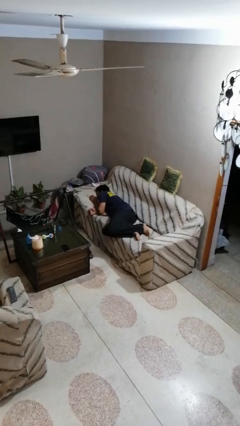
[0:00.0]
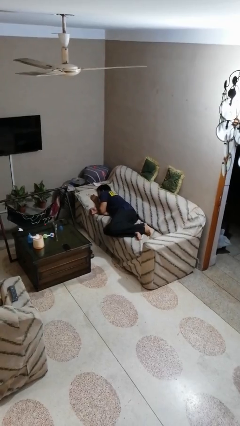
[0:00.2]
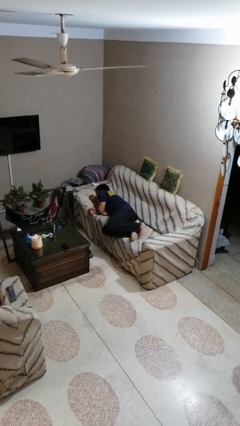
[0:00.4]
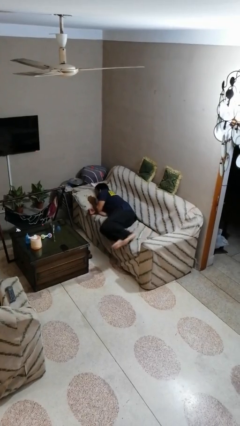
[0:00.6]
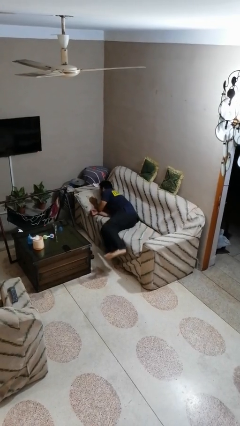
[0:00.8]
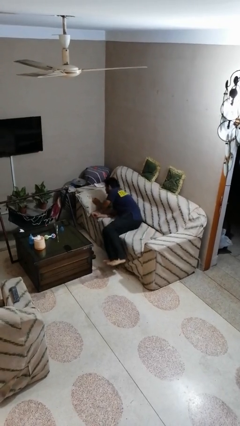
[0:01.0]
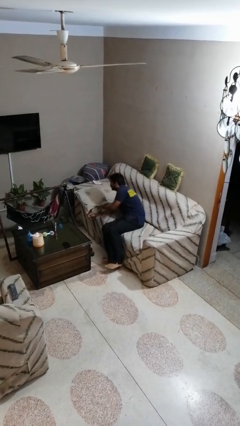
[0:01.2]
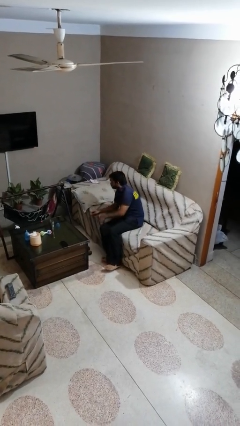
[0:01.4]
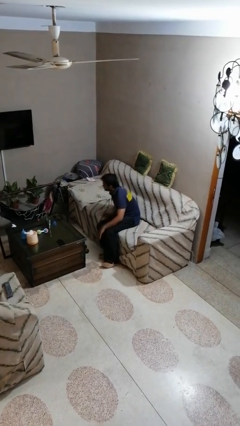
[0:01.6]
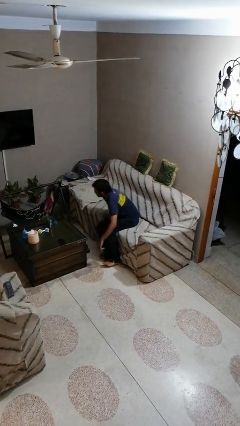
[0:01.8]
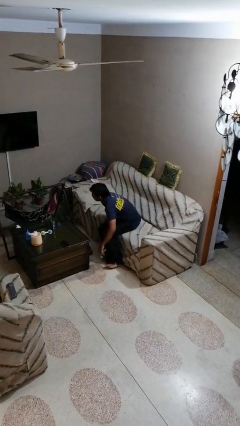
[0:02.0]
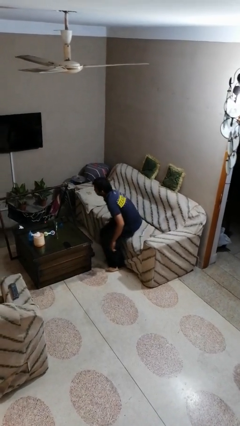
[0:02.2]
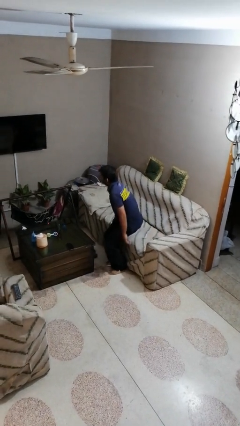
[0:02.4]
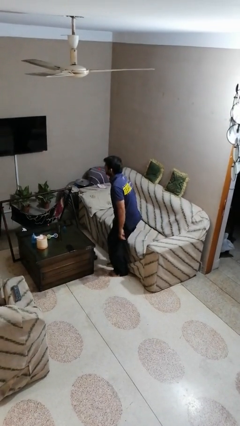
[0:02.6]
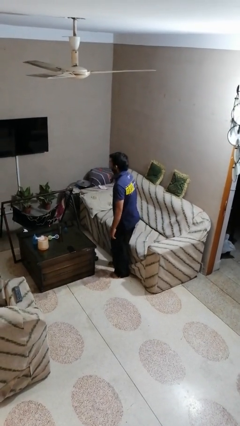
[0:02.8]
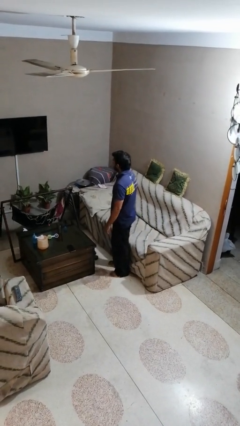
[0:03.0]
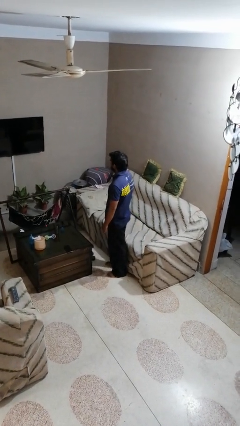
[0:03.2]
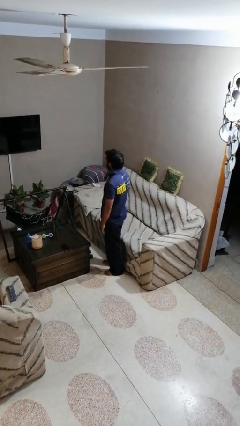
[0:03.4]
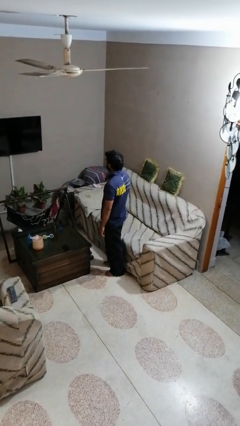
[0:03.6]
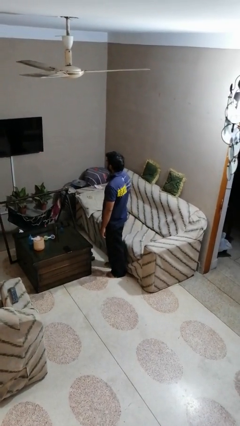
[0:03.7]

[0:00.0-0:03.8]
person stands up

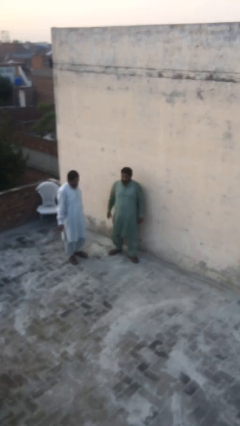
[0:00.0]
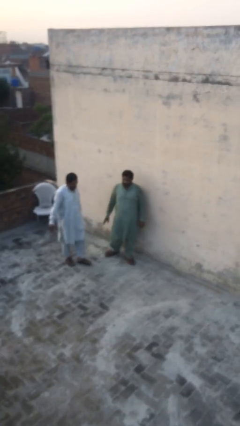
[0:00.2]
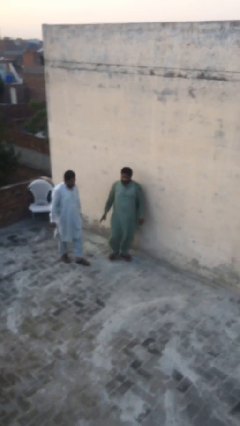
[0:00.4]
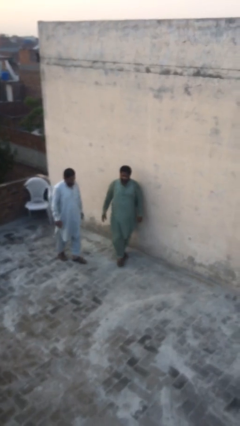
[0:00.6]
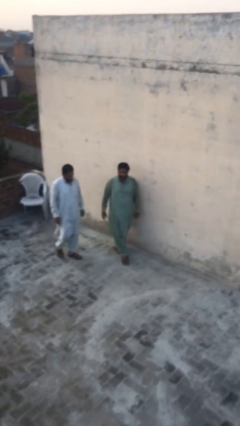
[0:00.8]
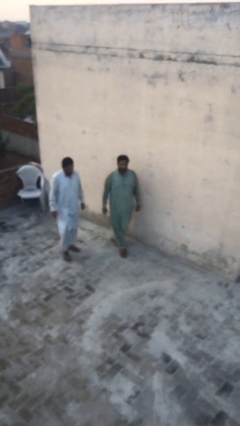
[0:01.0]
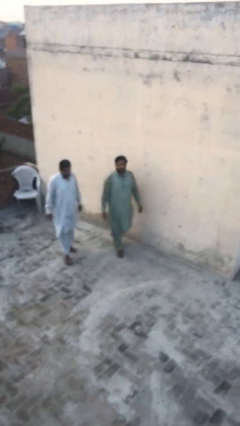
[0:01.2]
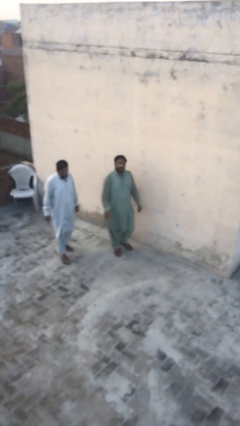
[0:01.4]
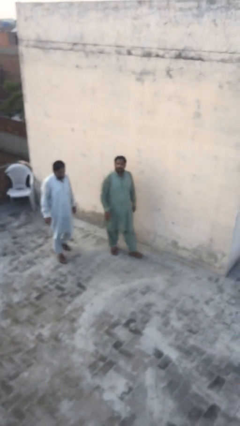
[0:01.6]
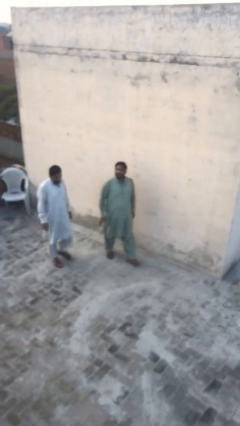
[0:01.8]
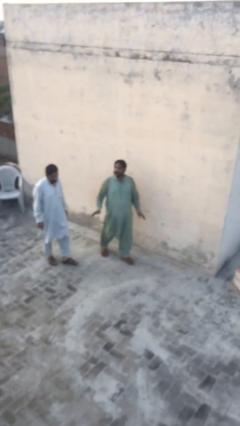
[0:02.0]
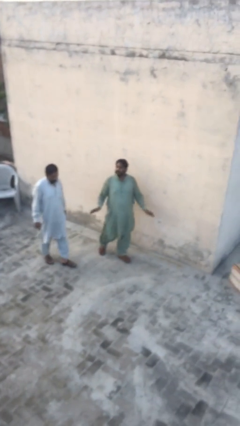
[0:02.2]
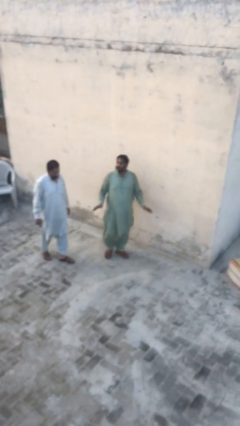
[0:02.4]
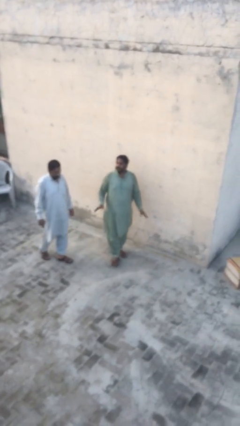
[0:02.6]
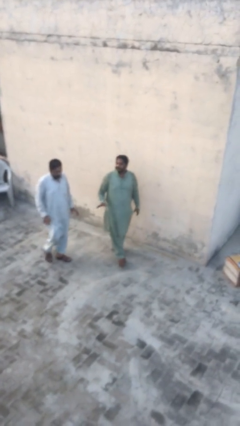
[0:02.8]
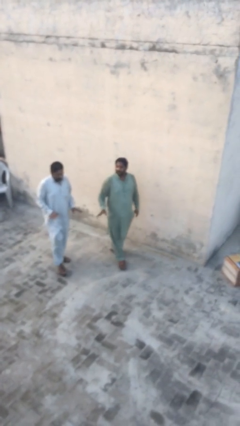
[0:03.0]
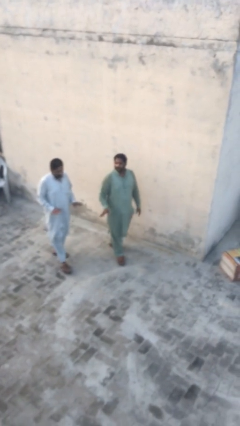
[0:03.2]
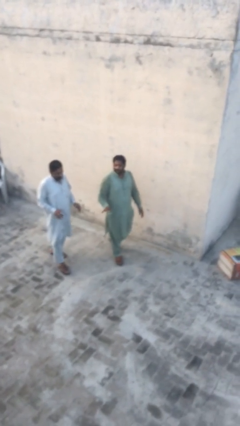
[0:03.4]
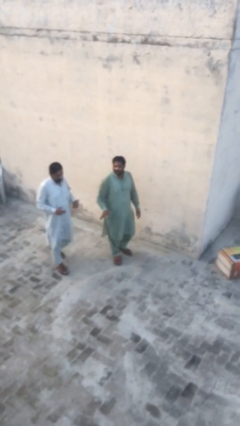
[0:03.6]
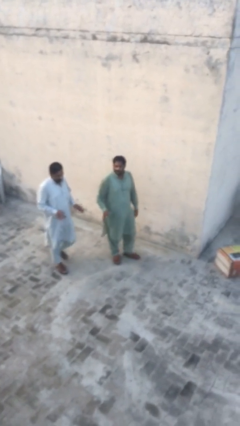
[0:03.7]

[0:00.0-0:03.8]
person talks to person

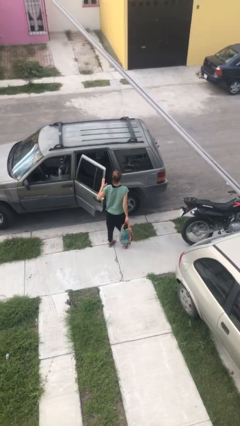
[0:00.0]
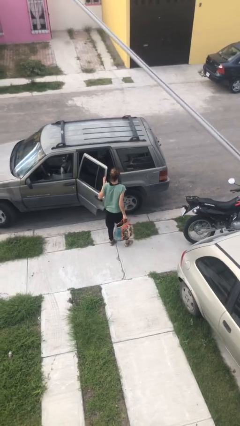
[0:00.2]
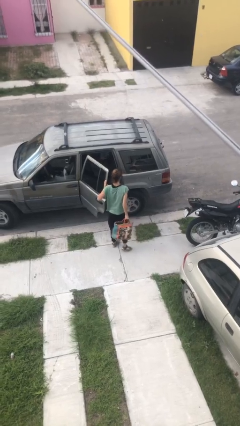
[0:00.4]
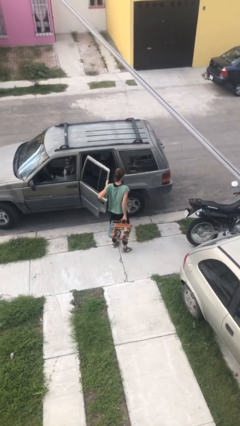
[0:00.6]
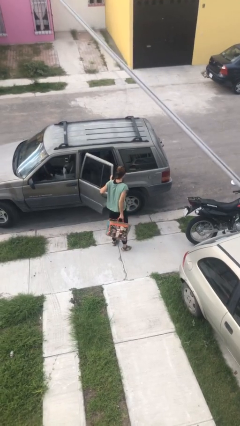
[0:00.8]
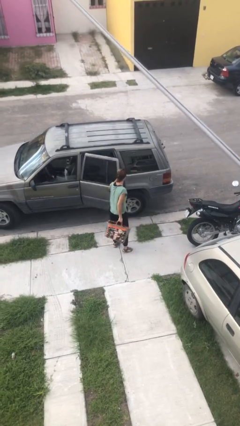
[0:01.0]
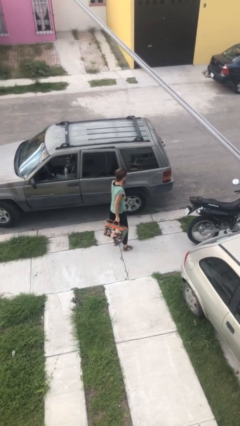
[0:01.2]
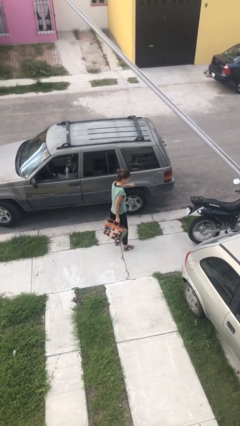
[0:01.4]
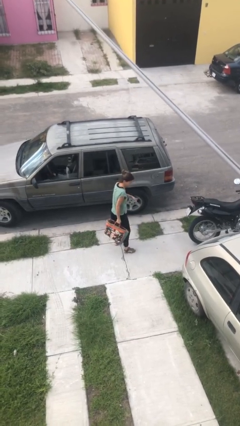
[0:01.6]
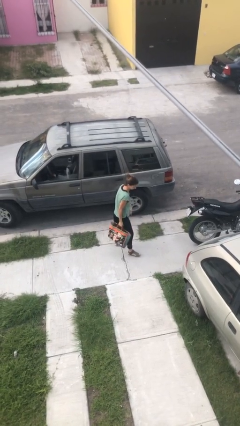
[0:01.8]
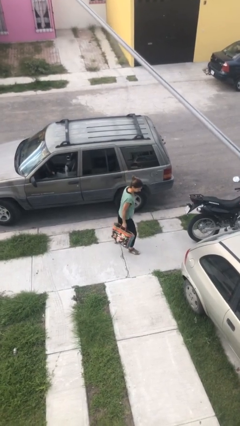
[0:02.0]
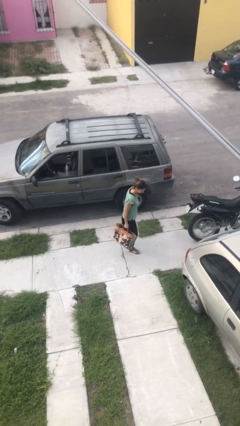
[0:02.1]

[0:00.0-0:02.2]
person closes car door

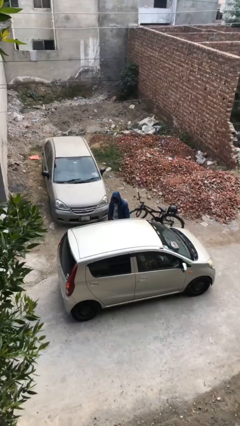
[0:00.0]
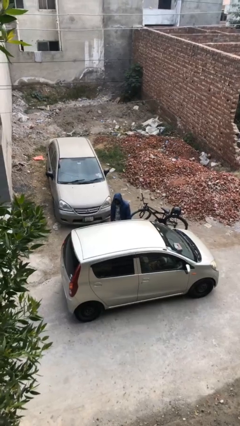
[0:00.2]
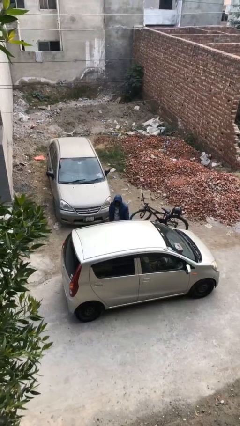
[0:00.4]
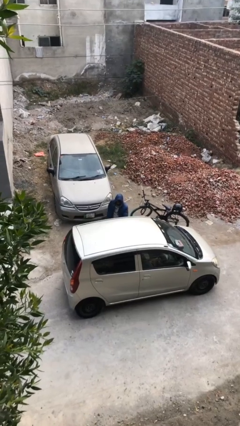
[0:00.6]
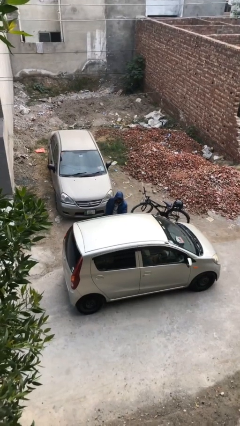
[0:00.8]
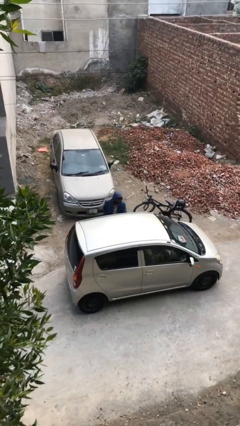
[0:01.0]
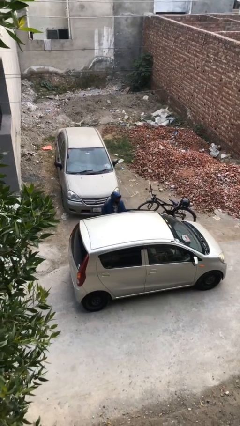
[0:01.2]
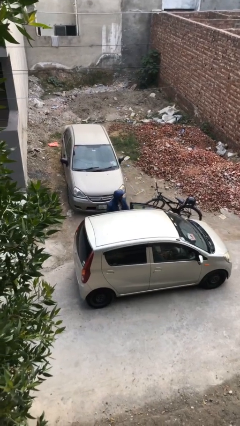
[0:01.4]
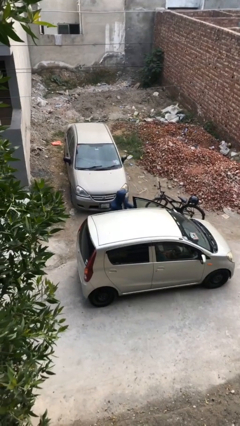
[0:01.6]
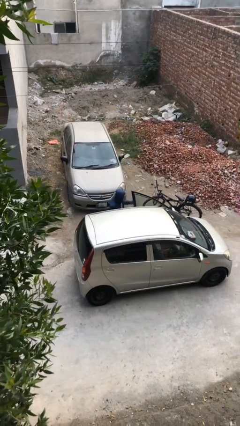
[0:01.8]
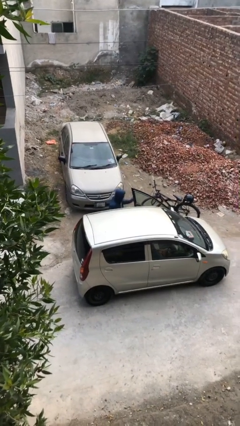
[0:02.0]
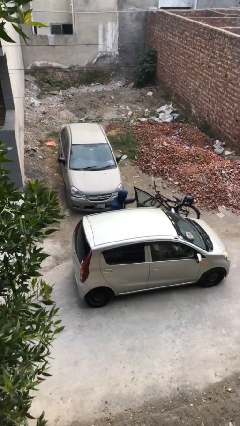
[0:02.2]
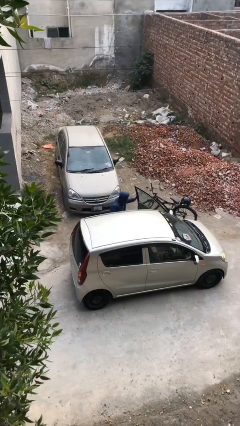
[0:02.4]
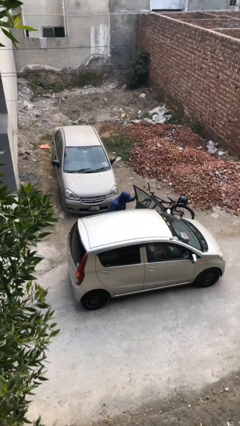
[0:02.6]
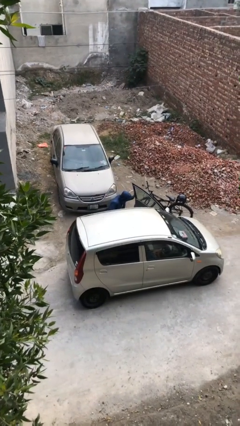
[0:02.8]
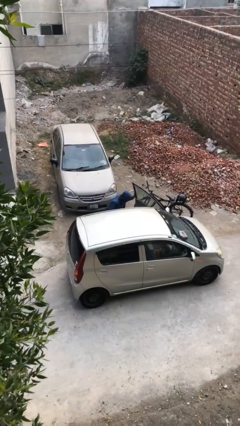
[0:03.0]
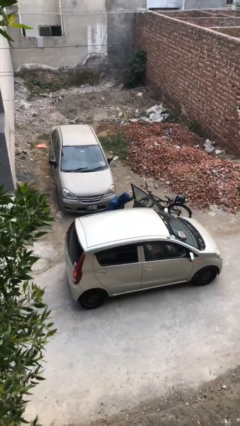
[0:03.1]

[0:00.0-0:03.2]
person opens car door

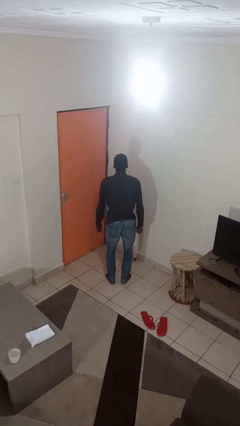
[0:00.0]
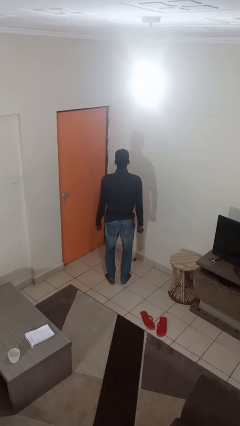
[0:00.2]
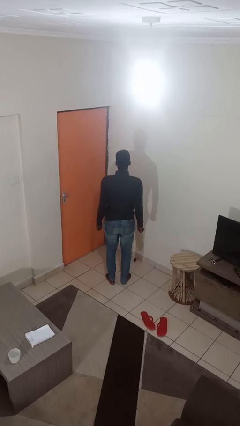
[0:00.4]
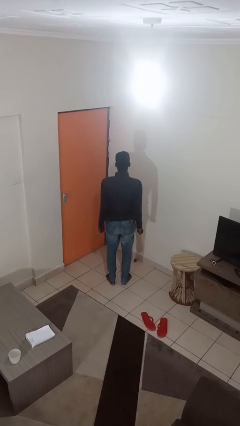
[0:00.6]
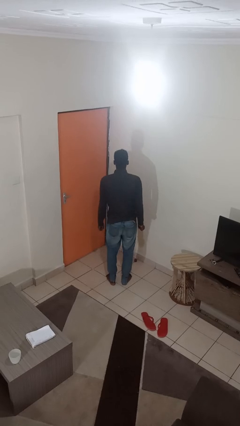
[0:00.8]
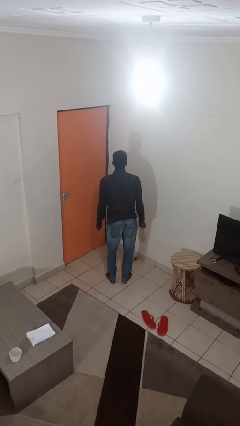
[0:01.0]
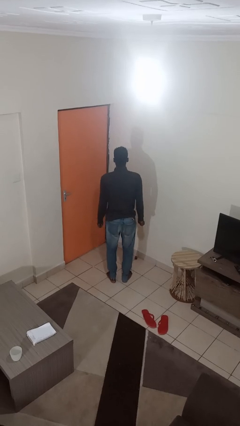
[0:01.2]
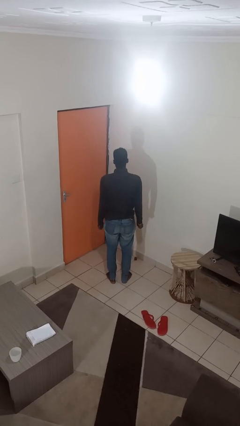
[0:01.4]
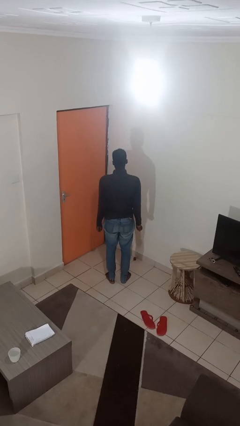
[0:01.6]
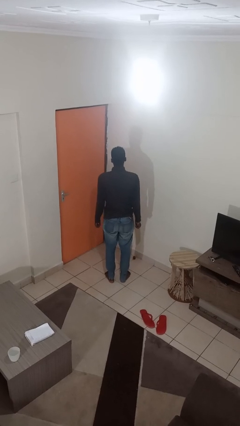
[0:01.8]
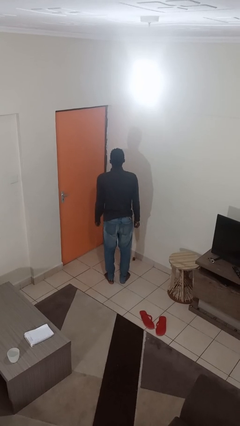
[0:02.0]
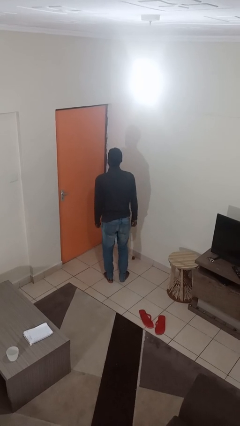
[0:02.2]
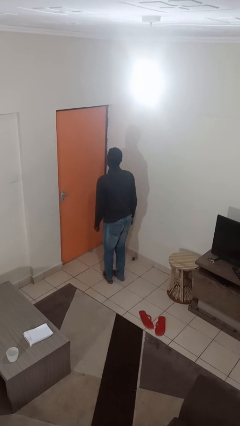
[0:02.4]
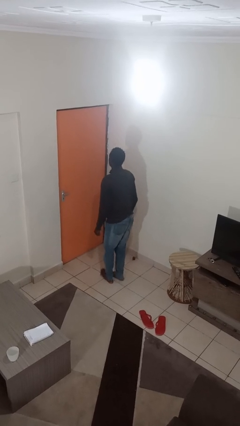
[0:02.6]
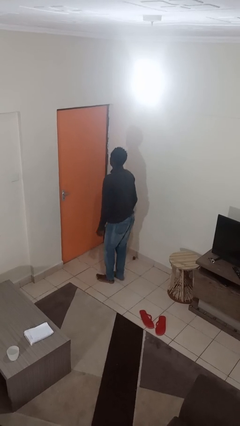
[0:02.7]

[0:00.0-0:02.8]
person wiggles hips

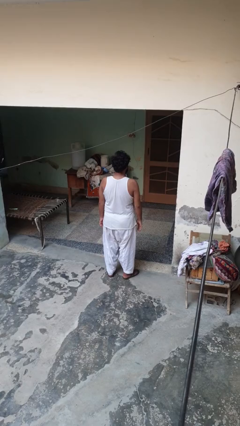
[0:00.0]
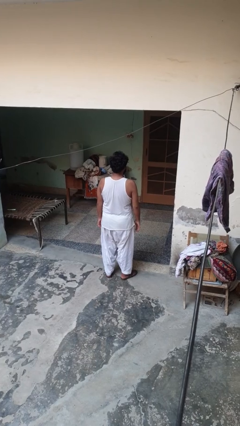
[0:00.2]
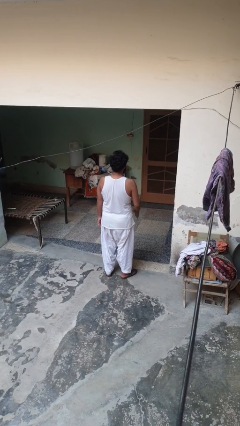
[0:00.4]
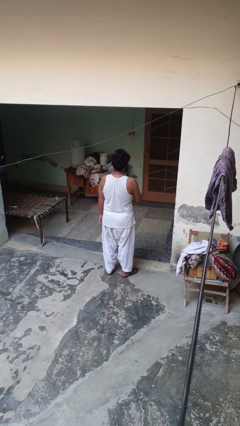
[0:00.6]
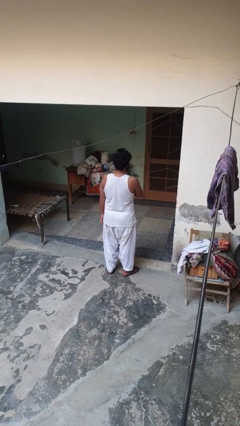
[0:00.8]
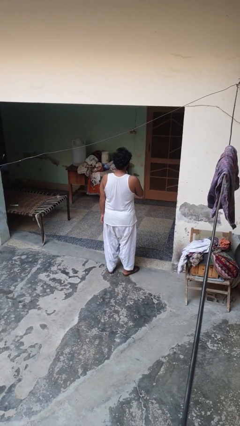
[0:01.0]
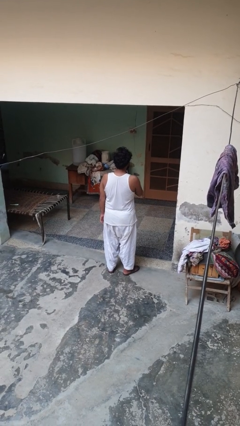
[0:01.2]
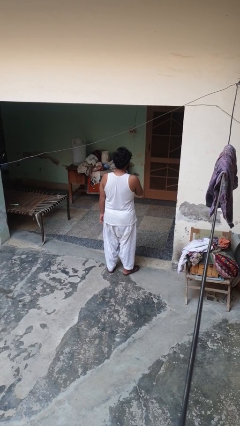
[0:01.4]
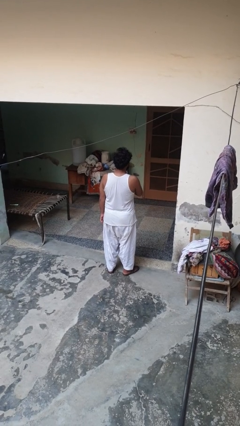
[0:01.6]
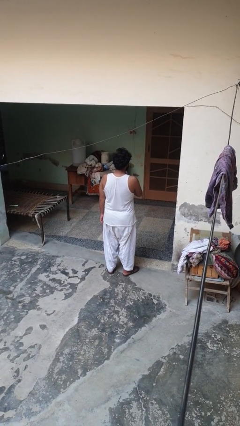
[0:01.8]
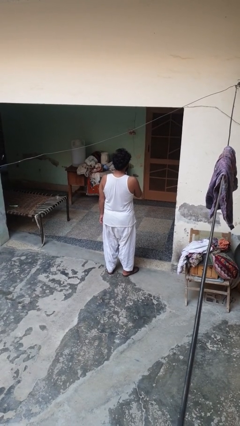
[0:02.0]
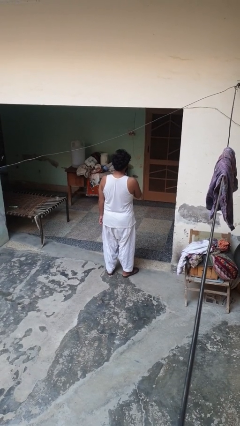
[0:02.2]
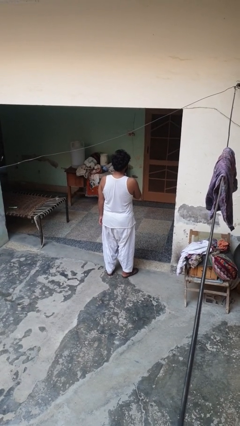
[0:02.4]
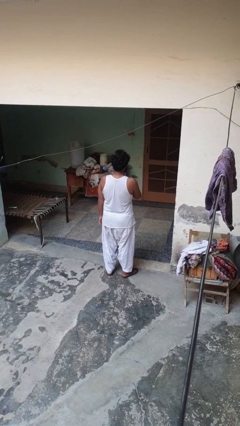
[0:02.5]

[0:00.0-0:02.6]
person drums on chest
